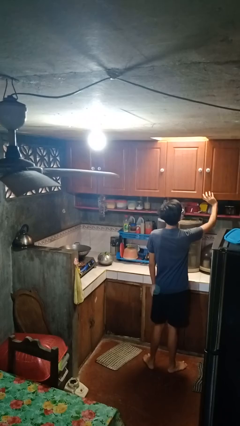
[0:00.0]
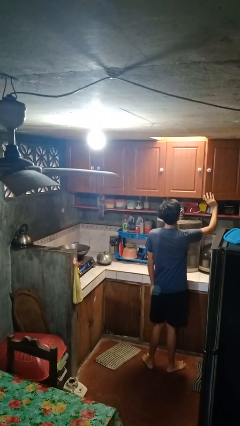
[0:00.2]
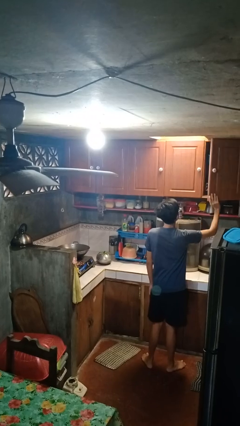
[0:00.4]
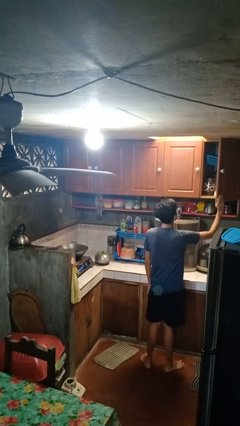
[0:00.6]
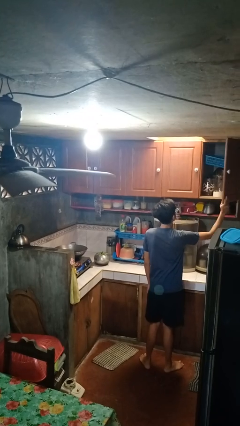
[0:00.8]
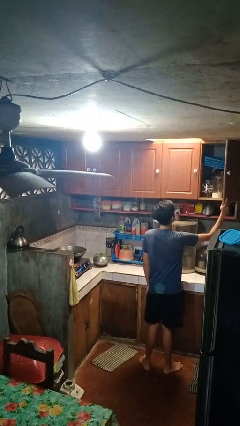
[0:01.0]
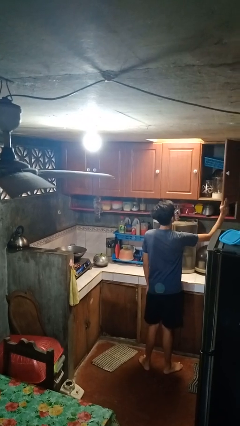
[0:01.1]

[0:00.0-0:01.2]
person opens cabinet

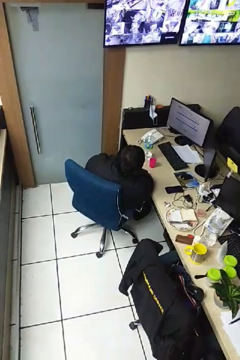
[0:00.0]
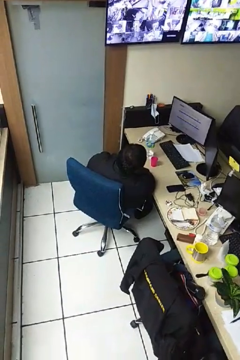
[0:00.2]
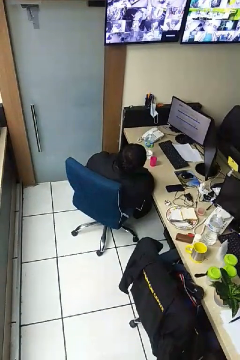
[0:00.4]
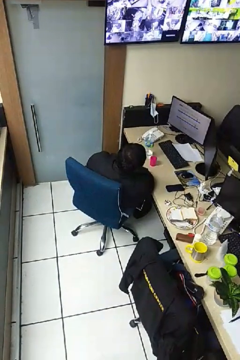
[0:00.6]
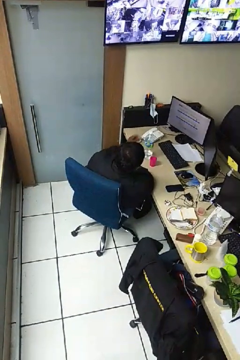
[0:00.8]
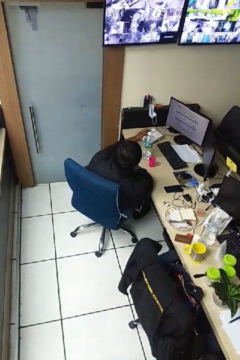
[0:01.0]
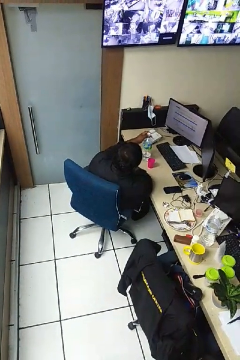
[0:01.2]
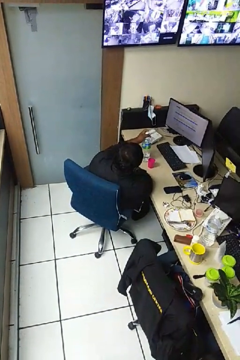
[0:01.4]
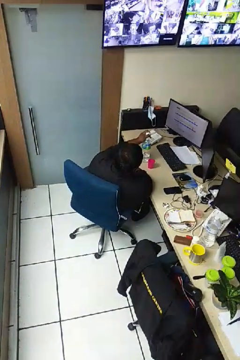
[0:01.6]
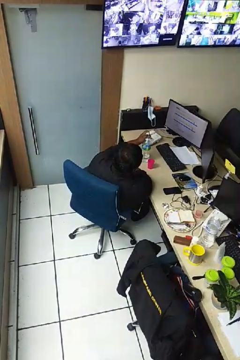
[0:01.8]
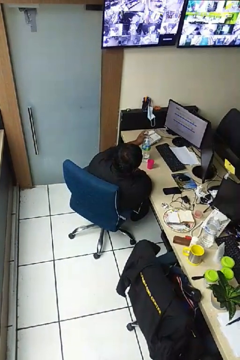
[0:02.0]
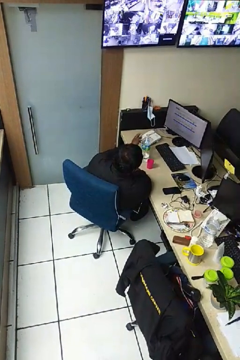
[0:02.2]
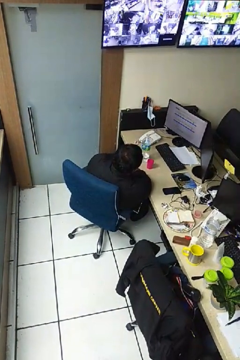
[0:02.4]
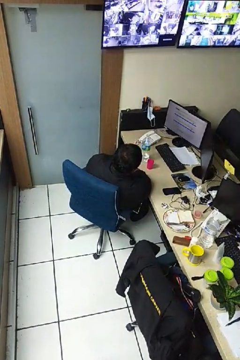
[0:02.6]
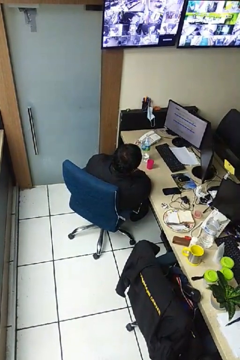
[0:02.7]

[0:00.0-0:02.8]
person unscrews lid from bottle

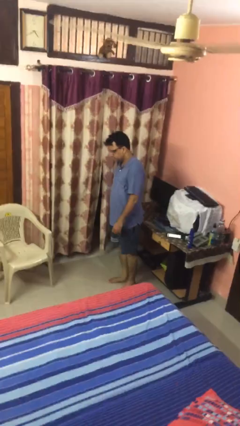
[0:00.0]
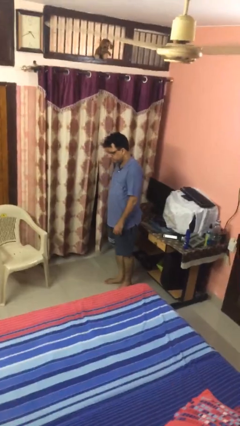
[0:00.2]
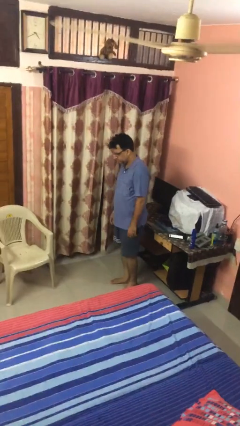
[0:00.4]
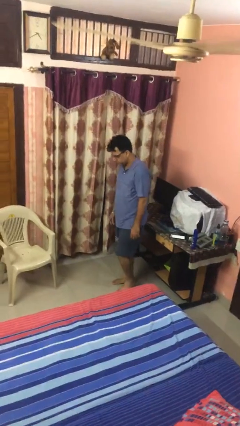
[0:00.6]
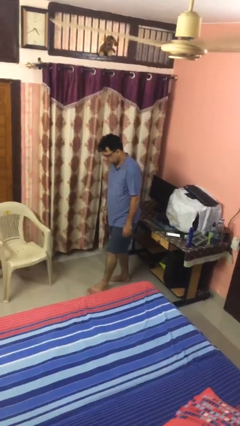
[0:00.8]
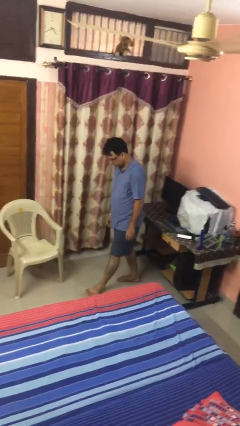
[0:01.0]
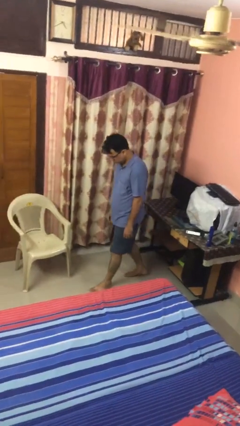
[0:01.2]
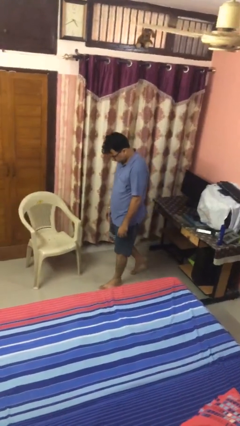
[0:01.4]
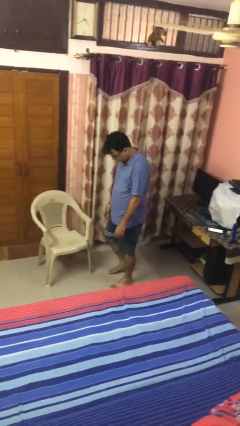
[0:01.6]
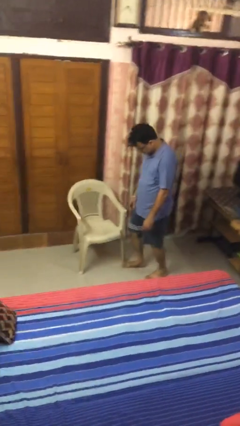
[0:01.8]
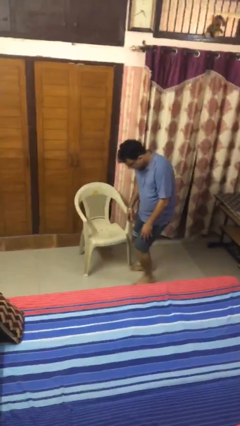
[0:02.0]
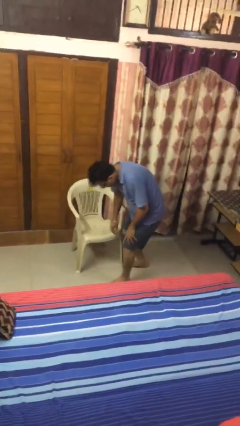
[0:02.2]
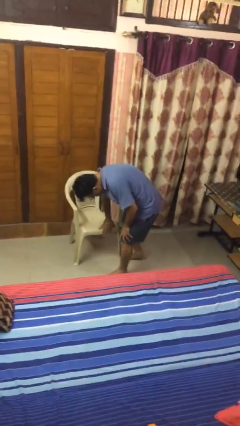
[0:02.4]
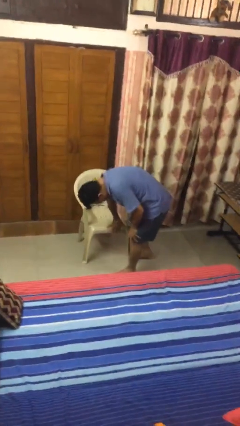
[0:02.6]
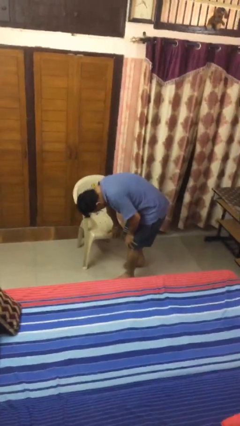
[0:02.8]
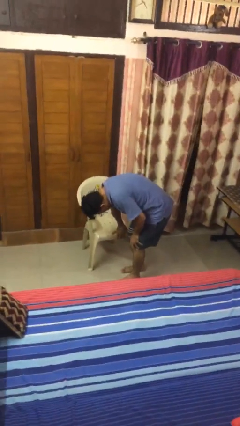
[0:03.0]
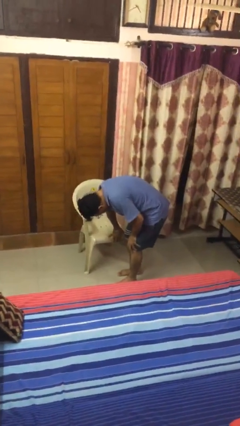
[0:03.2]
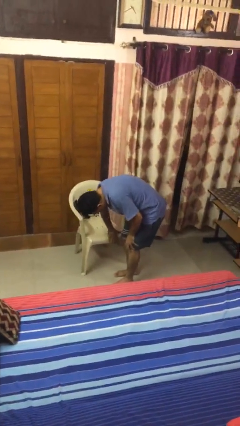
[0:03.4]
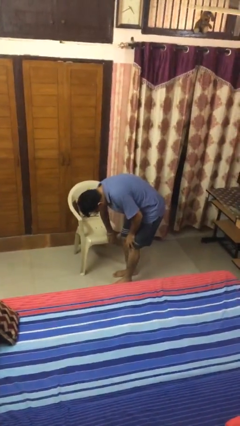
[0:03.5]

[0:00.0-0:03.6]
person stubs toe

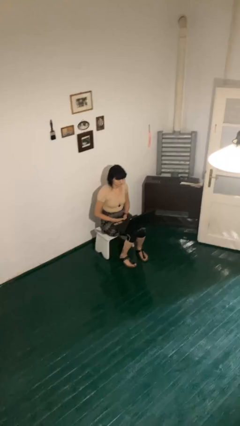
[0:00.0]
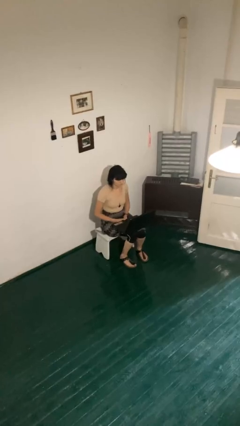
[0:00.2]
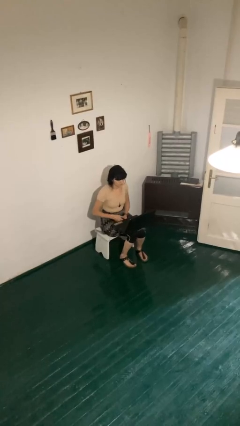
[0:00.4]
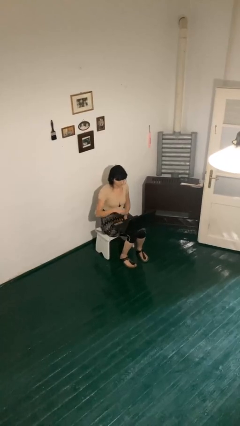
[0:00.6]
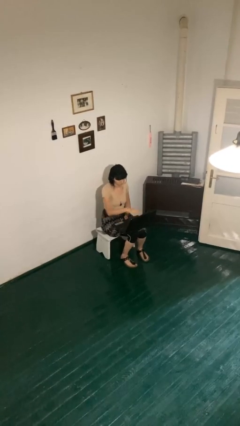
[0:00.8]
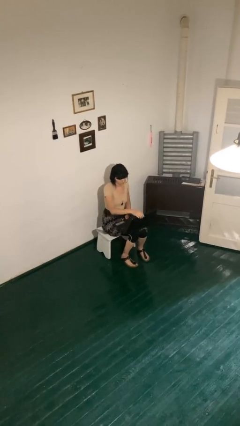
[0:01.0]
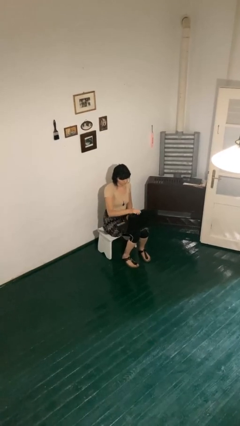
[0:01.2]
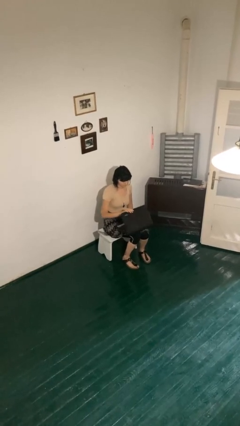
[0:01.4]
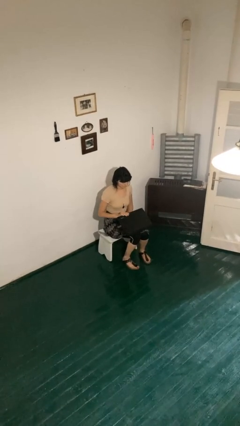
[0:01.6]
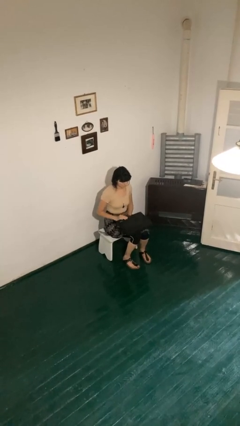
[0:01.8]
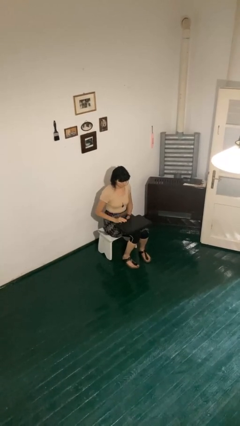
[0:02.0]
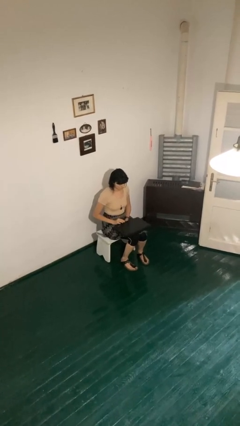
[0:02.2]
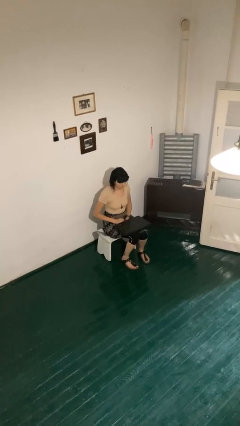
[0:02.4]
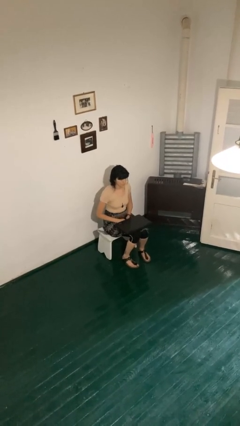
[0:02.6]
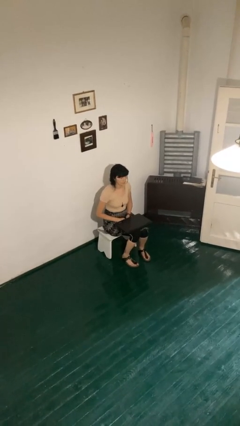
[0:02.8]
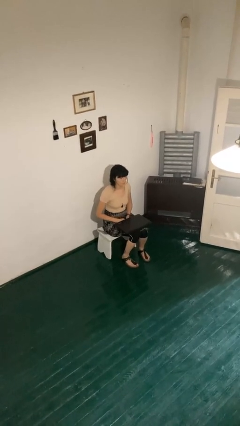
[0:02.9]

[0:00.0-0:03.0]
person closes laptop

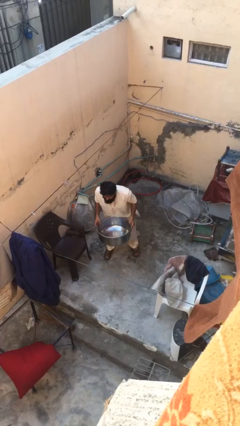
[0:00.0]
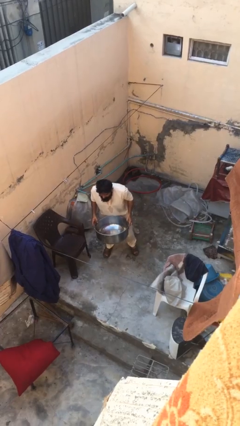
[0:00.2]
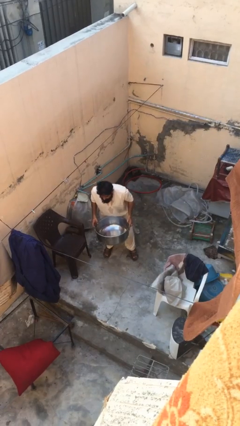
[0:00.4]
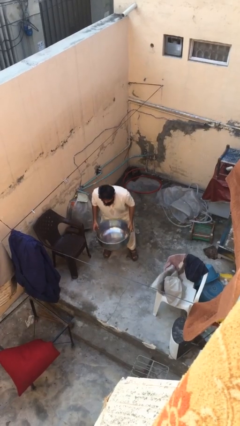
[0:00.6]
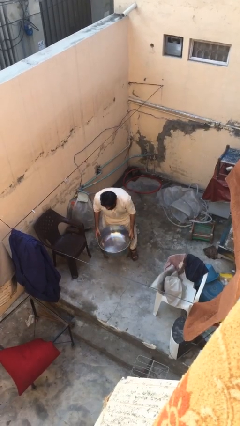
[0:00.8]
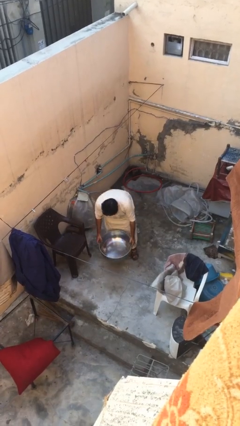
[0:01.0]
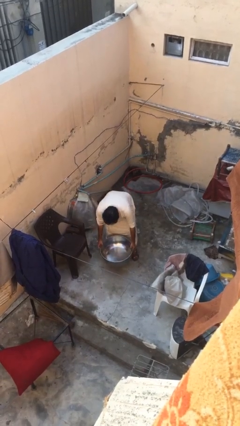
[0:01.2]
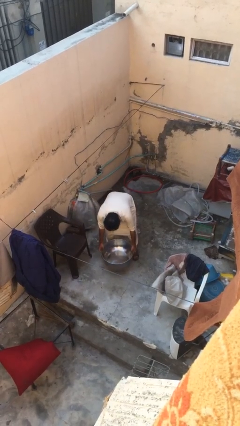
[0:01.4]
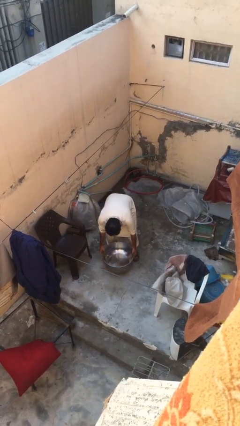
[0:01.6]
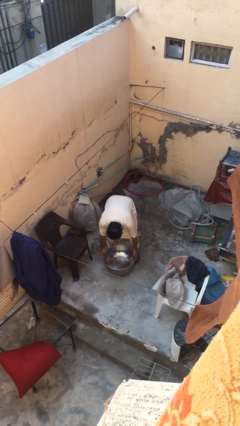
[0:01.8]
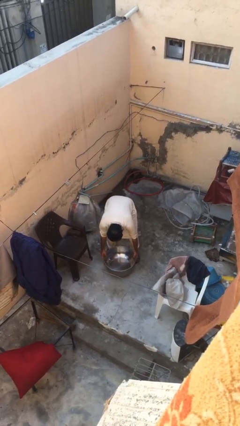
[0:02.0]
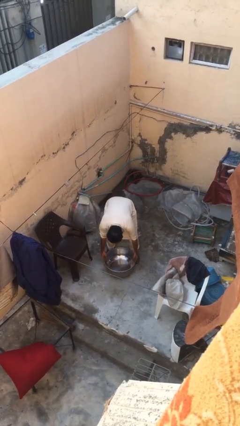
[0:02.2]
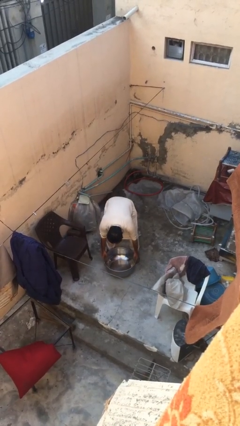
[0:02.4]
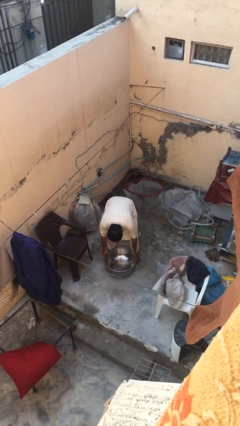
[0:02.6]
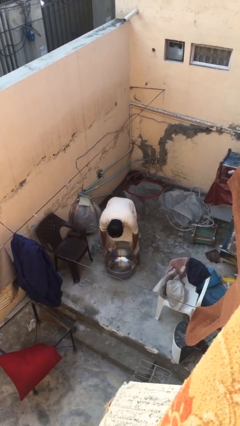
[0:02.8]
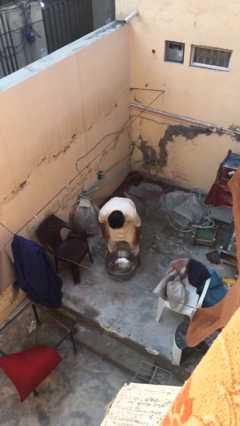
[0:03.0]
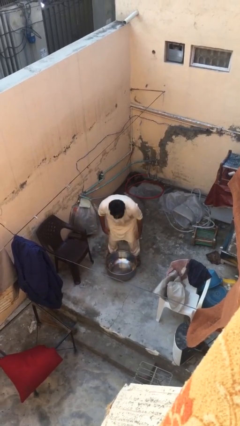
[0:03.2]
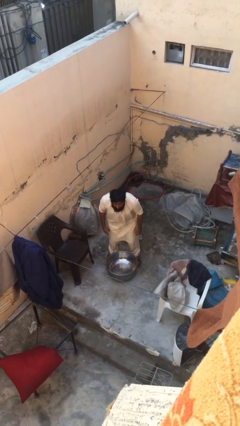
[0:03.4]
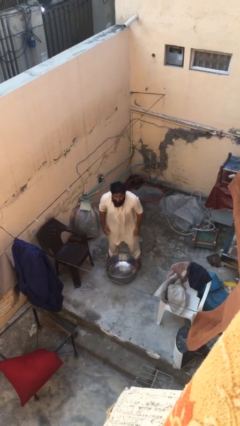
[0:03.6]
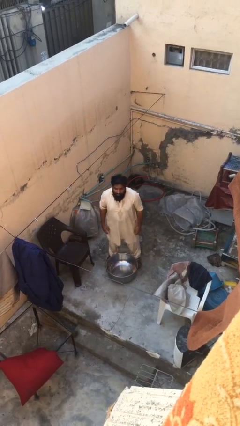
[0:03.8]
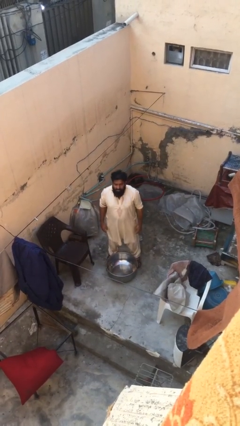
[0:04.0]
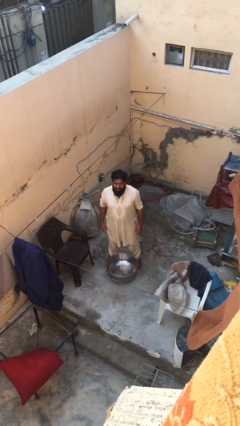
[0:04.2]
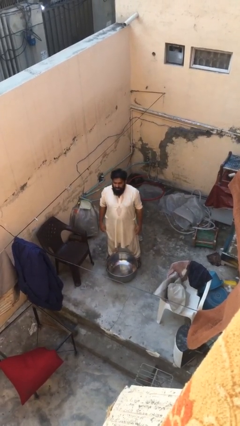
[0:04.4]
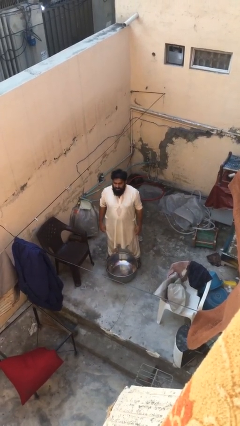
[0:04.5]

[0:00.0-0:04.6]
person puts down object on floor

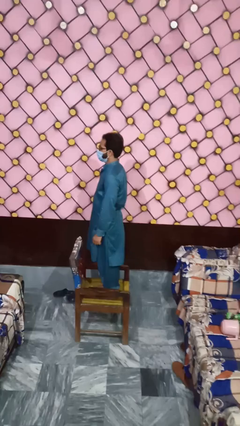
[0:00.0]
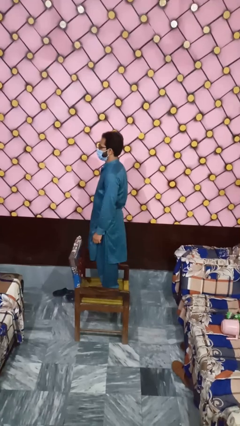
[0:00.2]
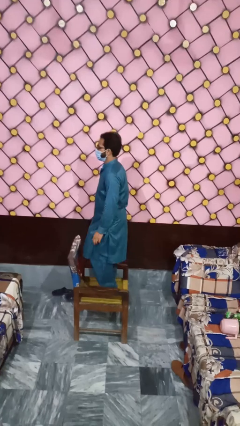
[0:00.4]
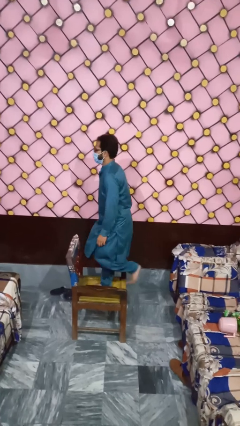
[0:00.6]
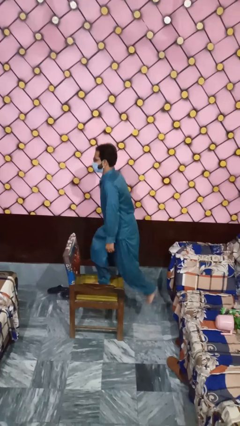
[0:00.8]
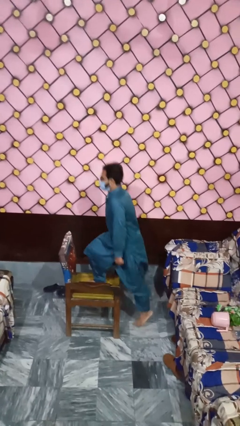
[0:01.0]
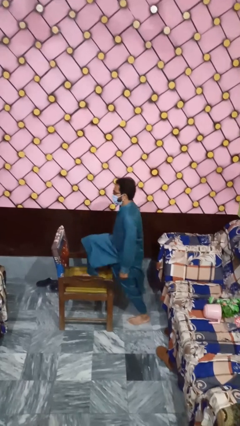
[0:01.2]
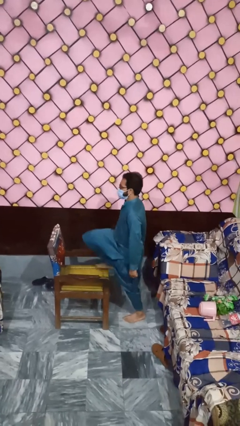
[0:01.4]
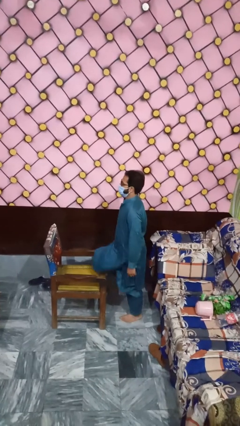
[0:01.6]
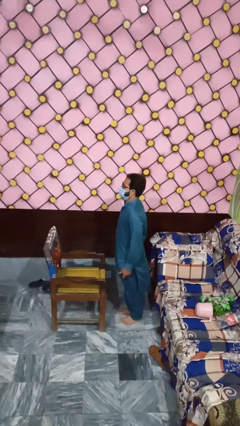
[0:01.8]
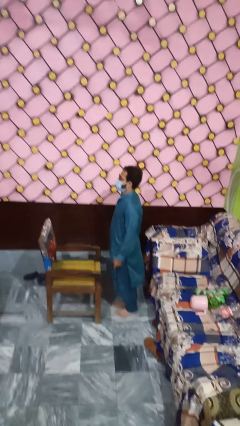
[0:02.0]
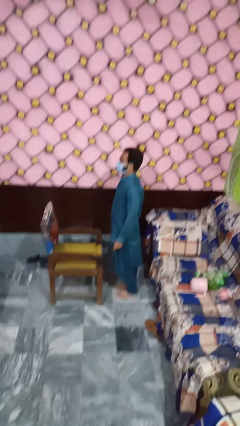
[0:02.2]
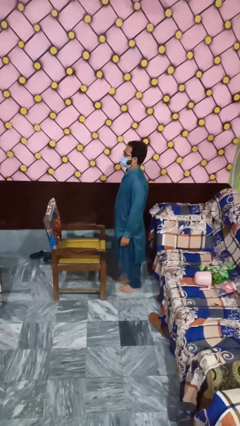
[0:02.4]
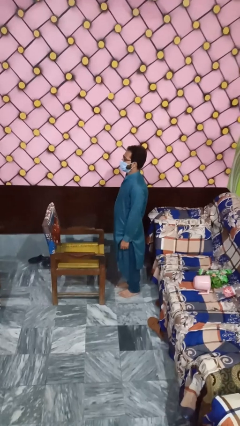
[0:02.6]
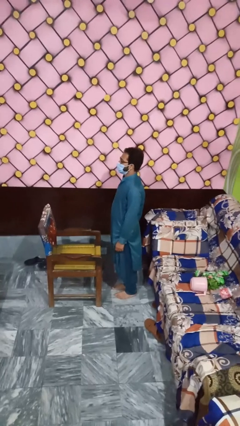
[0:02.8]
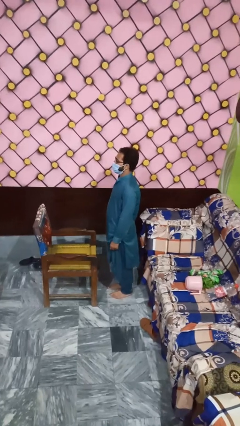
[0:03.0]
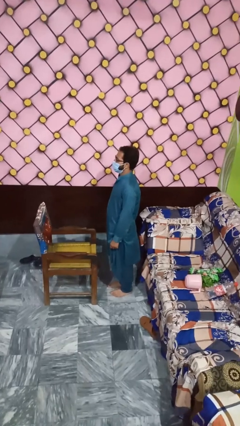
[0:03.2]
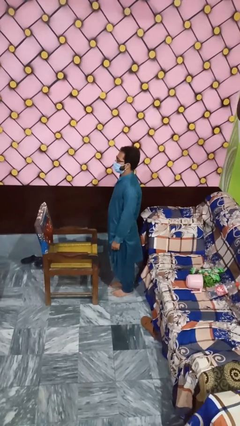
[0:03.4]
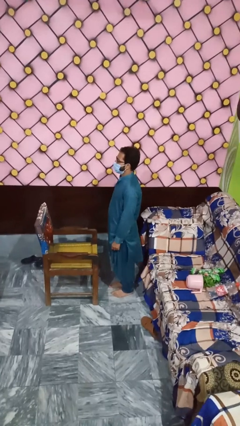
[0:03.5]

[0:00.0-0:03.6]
person climbs off chair
